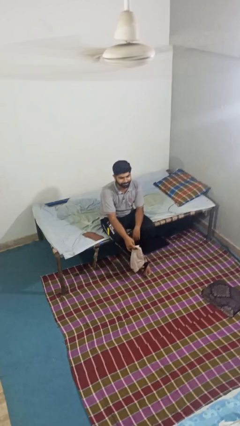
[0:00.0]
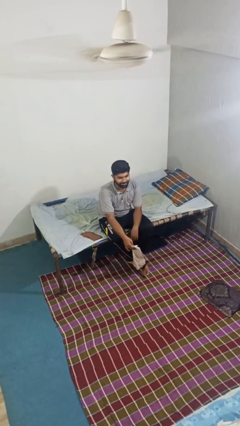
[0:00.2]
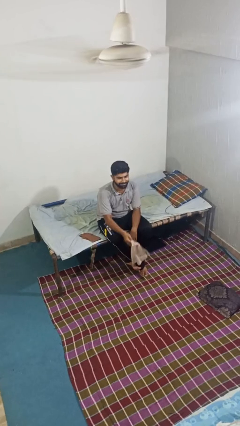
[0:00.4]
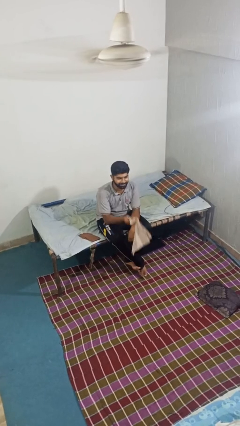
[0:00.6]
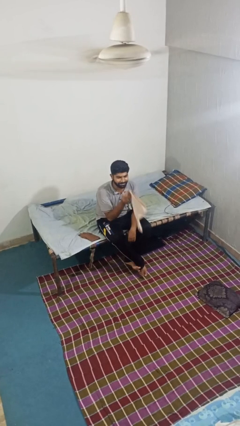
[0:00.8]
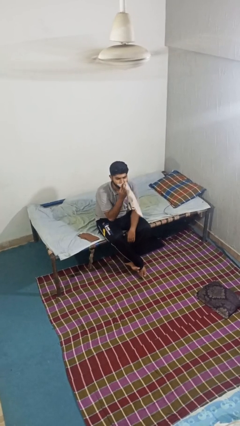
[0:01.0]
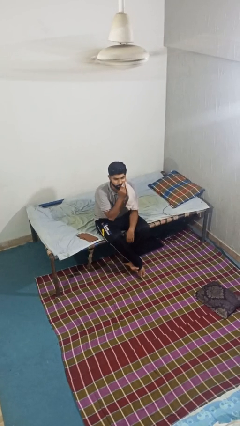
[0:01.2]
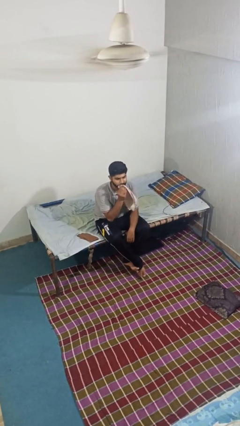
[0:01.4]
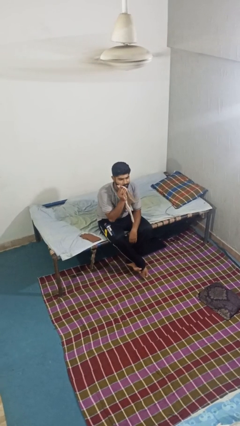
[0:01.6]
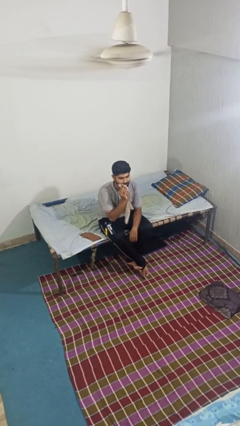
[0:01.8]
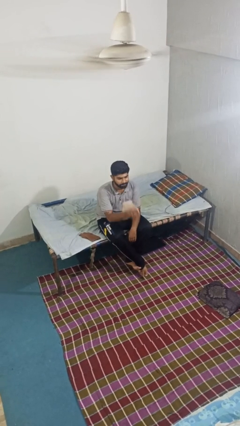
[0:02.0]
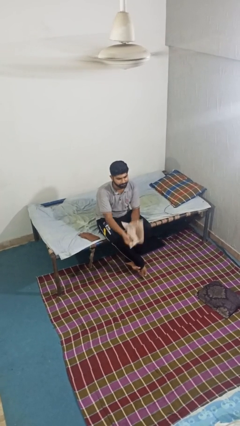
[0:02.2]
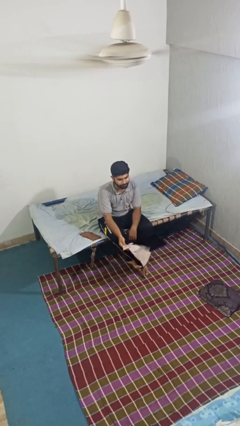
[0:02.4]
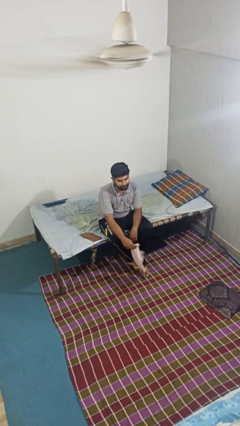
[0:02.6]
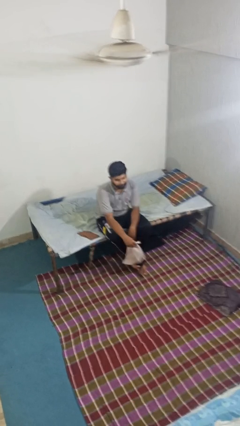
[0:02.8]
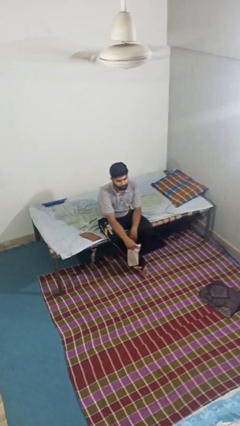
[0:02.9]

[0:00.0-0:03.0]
person wipes mouth with napkin

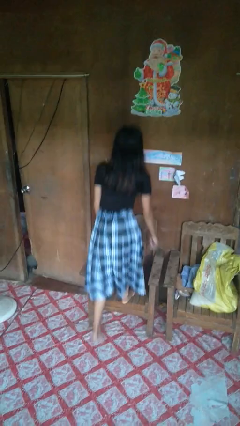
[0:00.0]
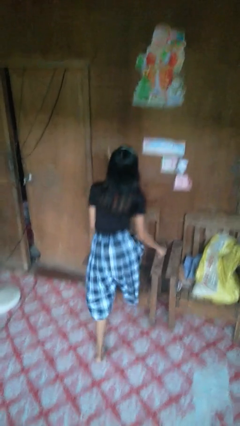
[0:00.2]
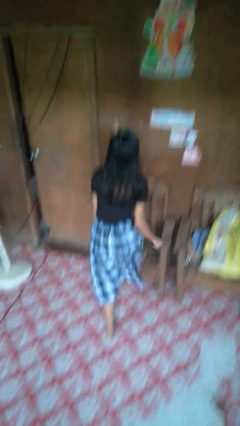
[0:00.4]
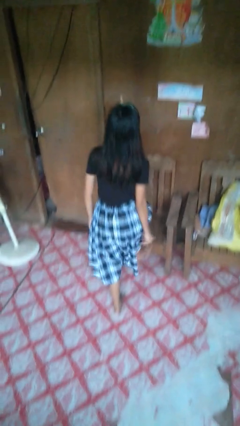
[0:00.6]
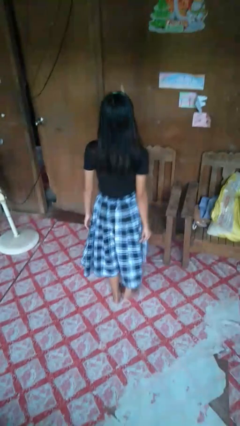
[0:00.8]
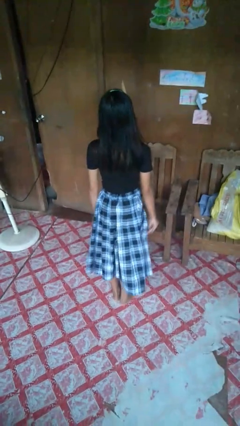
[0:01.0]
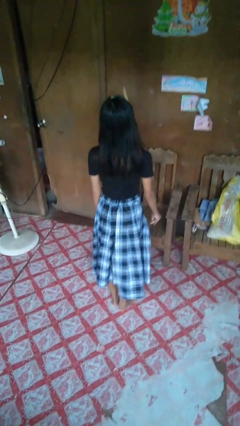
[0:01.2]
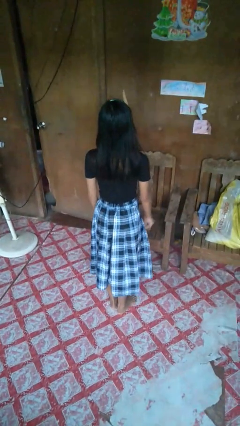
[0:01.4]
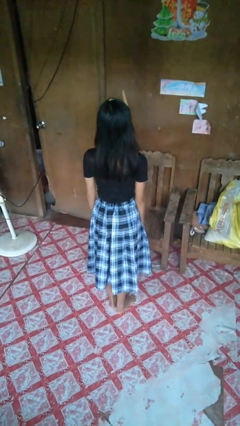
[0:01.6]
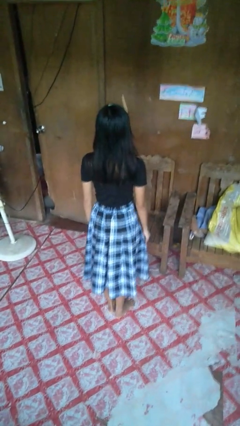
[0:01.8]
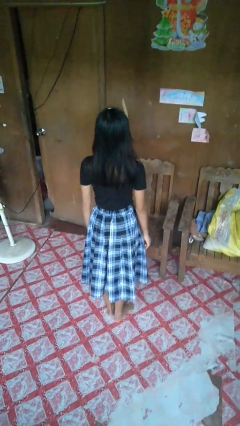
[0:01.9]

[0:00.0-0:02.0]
person climbs off chair

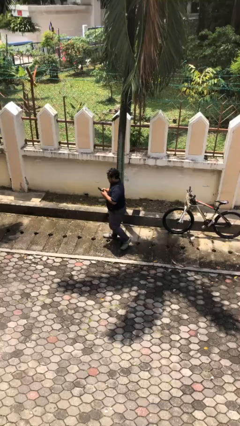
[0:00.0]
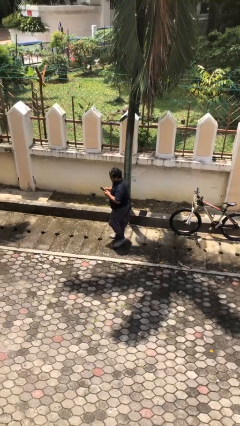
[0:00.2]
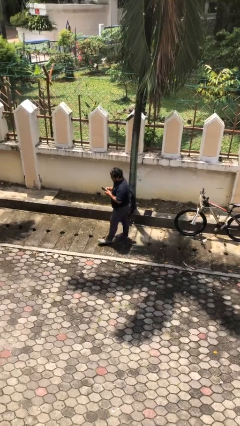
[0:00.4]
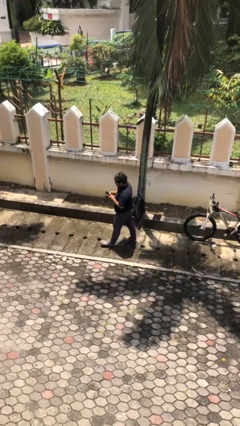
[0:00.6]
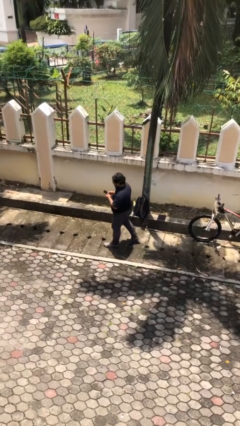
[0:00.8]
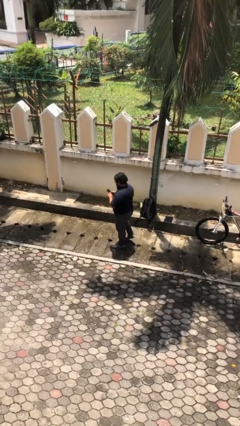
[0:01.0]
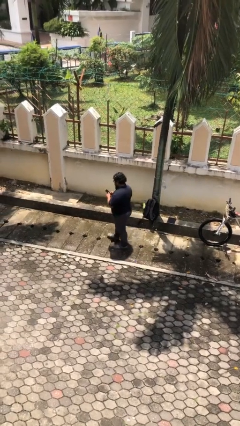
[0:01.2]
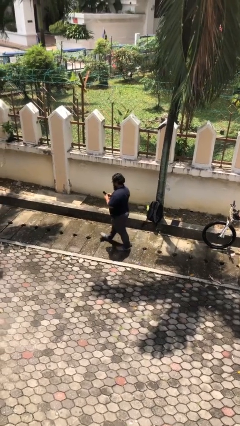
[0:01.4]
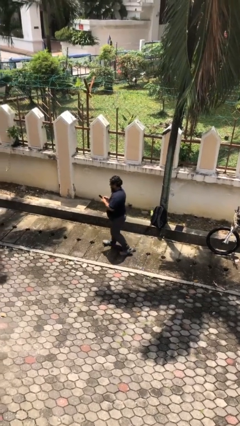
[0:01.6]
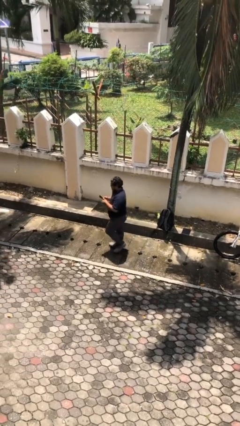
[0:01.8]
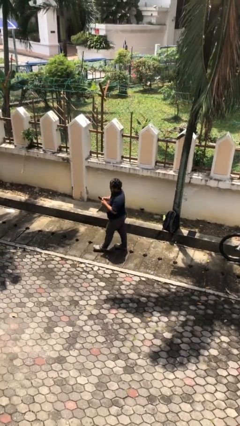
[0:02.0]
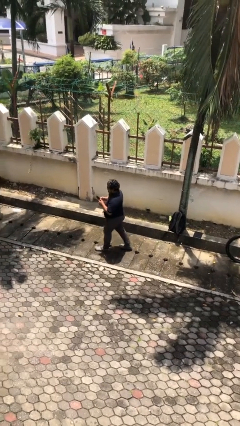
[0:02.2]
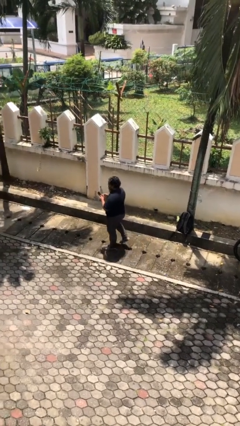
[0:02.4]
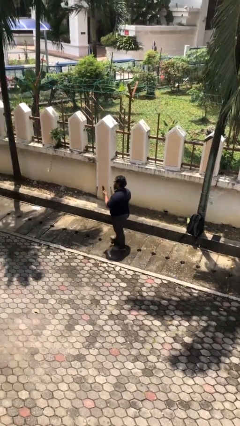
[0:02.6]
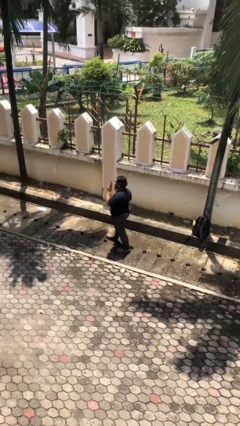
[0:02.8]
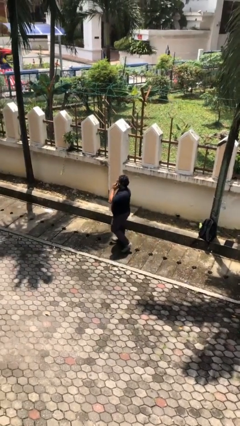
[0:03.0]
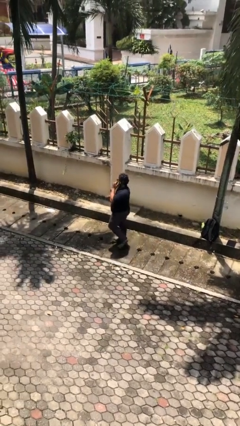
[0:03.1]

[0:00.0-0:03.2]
person texts on phone

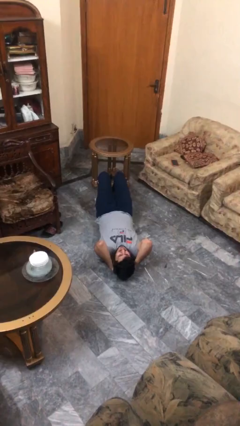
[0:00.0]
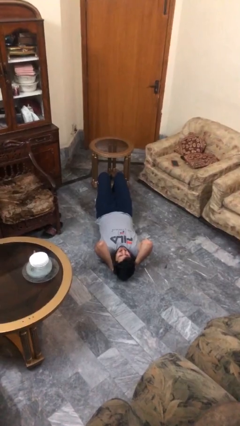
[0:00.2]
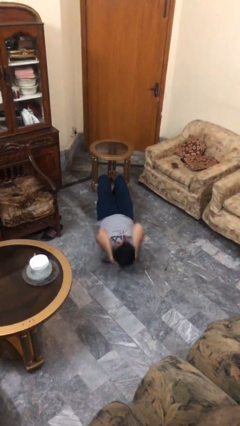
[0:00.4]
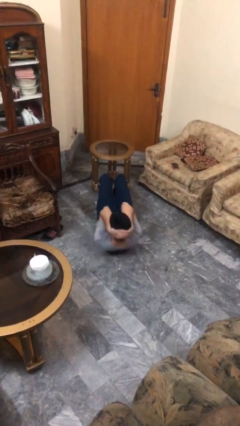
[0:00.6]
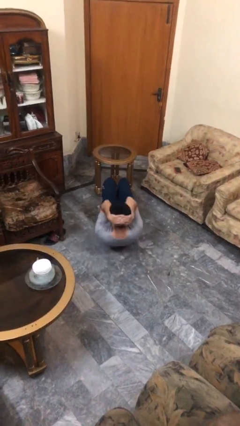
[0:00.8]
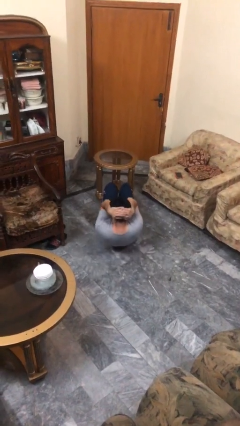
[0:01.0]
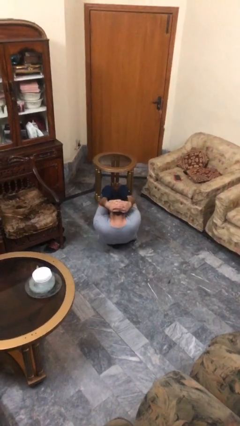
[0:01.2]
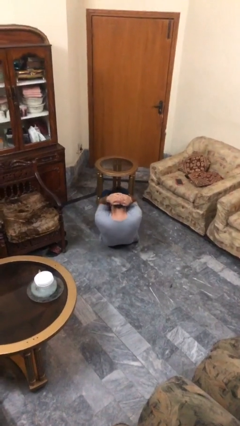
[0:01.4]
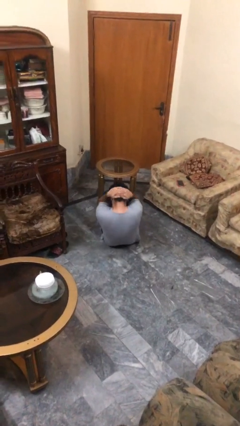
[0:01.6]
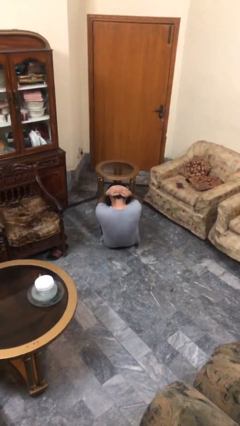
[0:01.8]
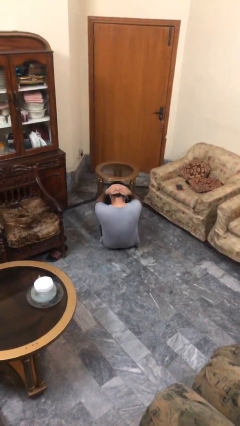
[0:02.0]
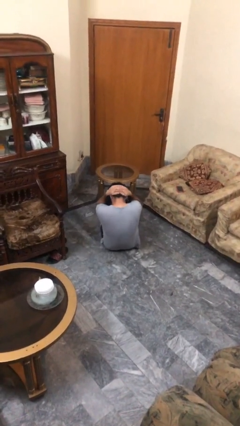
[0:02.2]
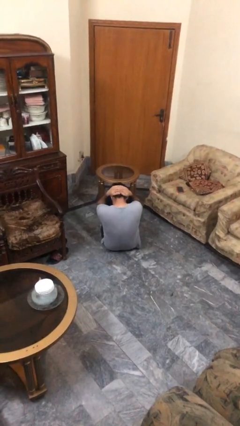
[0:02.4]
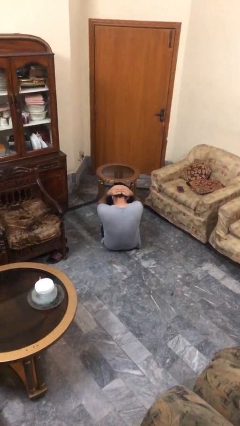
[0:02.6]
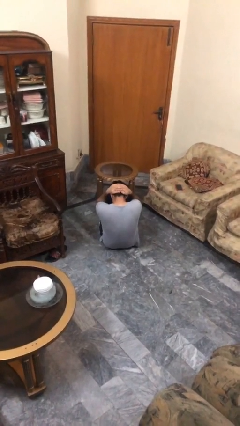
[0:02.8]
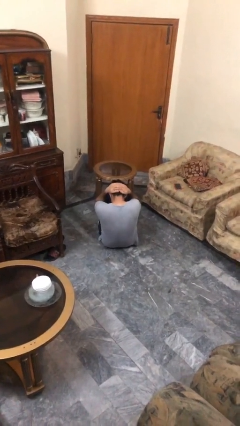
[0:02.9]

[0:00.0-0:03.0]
person exercises with situp

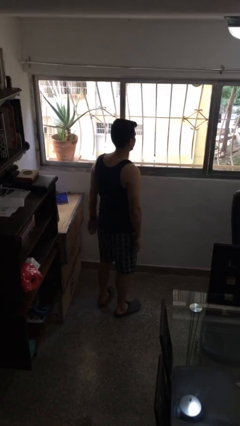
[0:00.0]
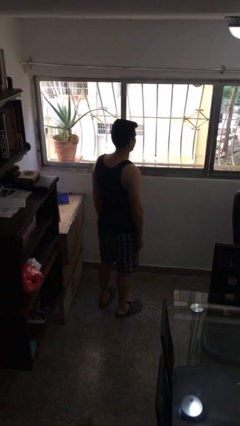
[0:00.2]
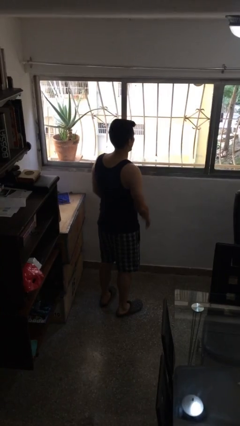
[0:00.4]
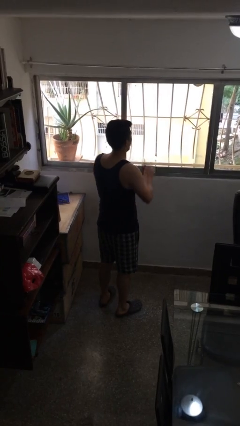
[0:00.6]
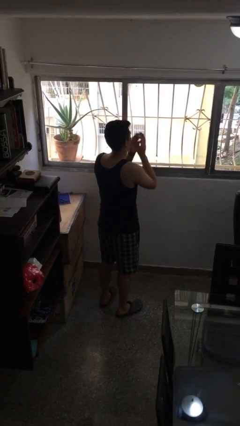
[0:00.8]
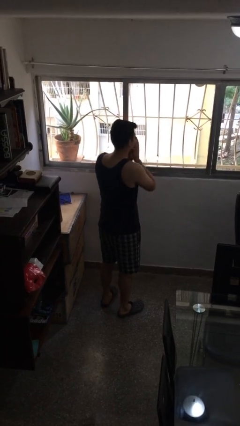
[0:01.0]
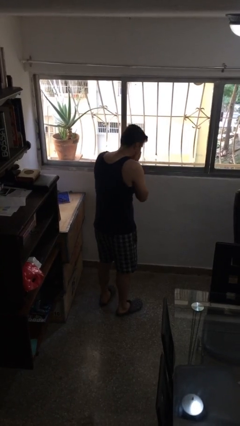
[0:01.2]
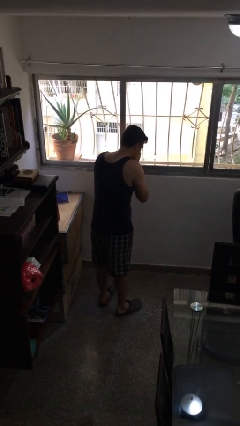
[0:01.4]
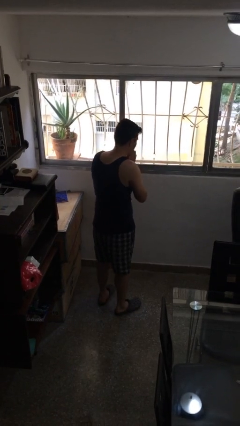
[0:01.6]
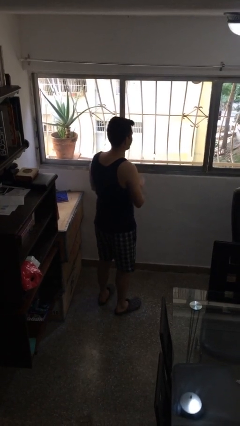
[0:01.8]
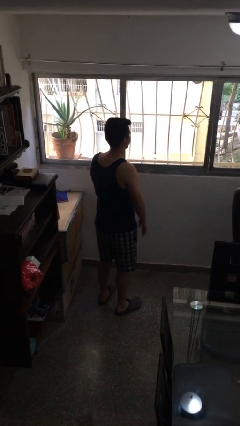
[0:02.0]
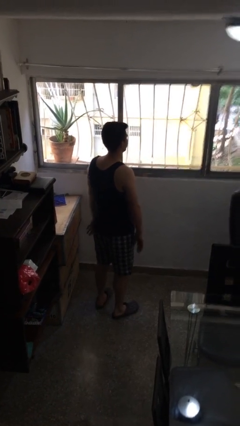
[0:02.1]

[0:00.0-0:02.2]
person sneezes into hand

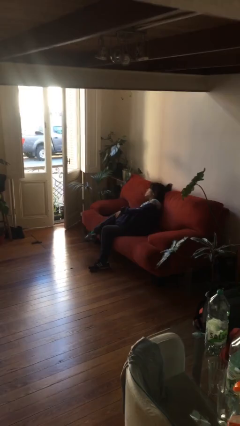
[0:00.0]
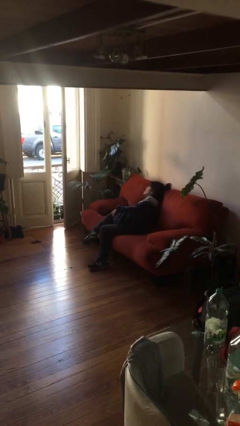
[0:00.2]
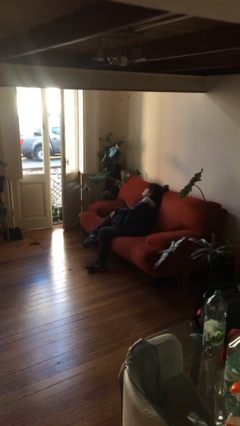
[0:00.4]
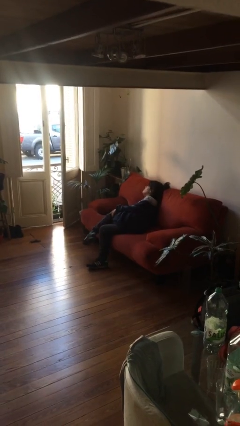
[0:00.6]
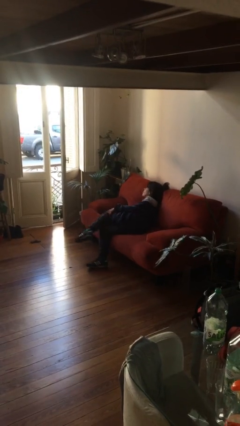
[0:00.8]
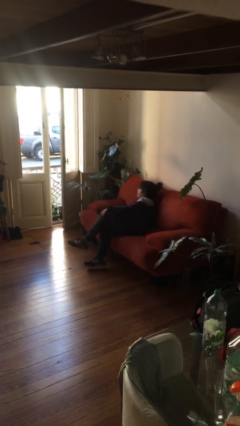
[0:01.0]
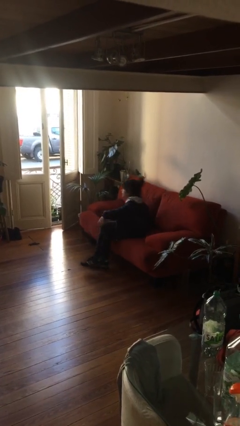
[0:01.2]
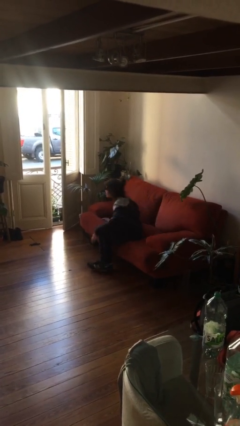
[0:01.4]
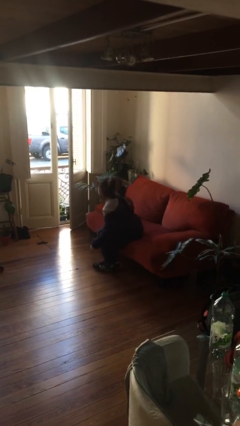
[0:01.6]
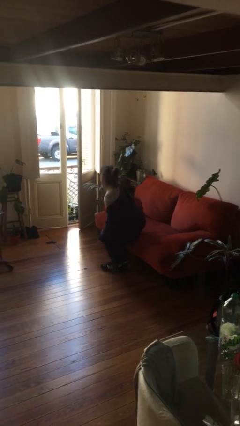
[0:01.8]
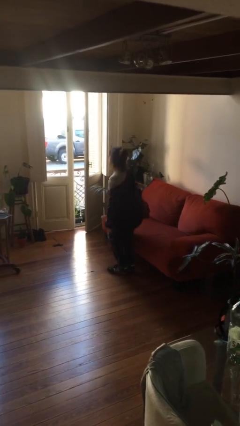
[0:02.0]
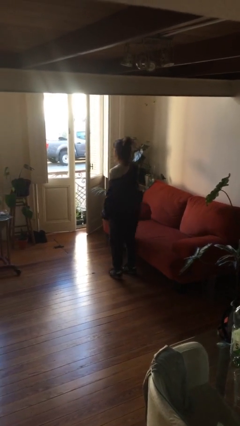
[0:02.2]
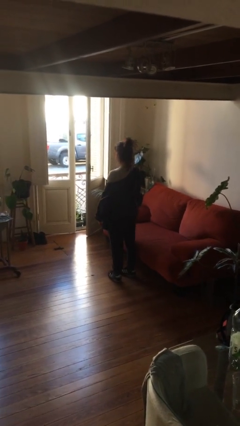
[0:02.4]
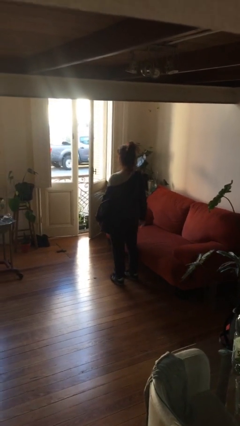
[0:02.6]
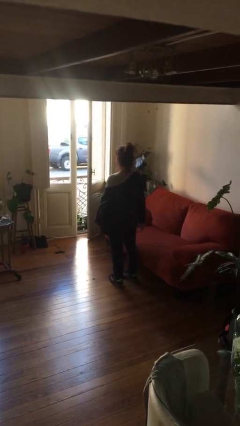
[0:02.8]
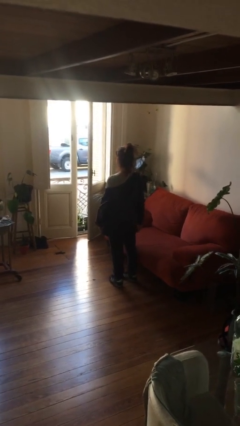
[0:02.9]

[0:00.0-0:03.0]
person stands up

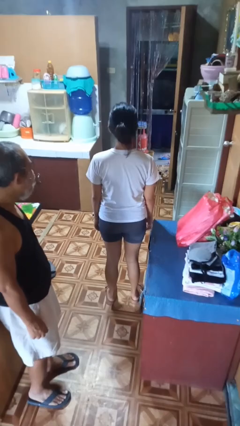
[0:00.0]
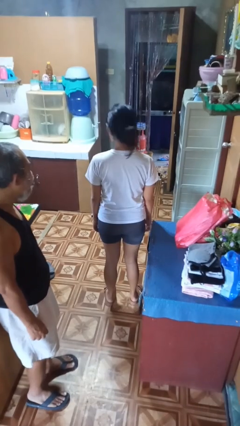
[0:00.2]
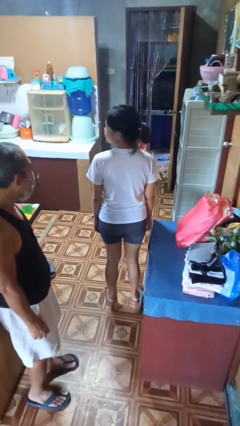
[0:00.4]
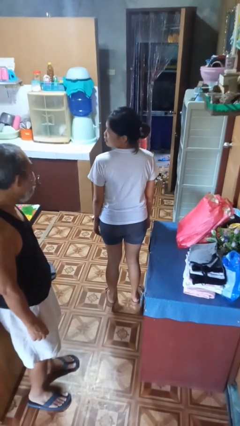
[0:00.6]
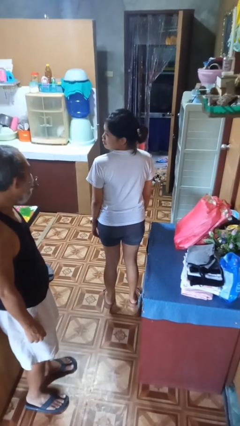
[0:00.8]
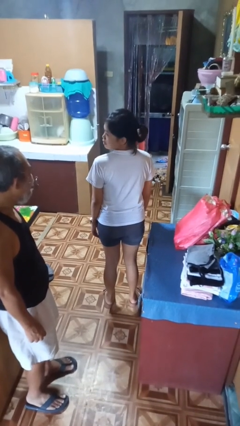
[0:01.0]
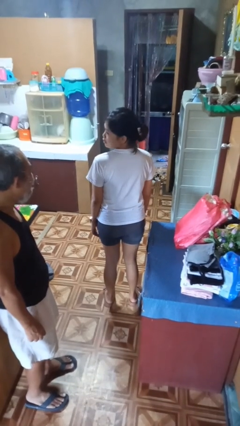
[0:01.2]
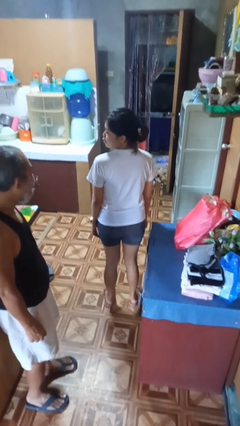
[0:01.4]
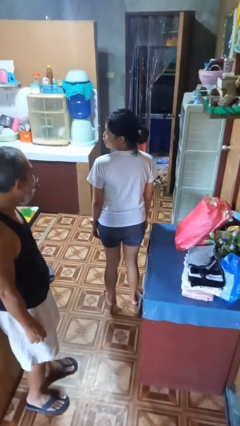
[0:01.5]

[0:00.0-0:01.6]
person looks over shoulder
